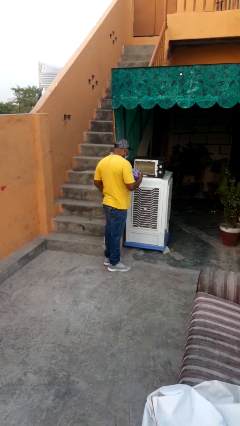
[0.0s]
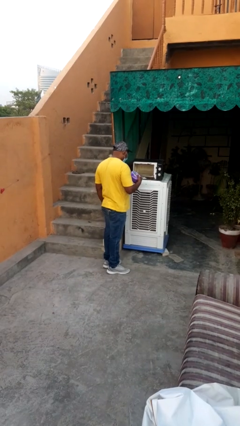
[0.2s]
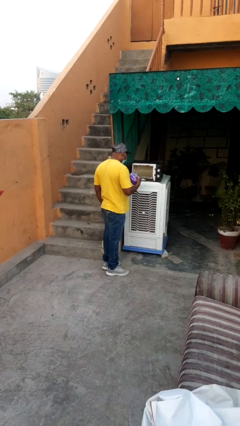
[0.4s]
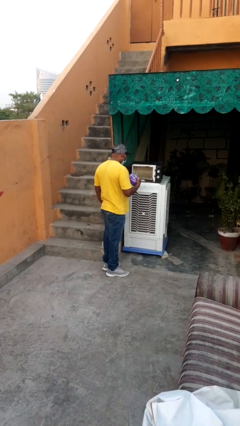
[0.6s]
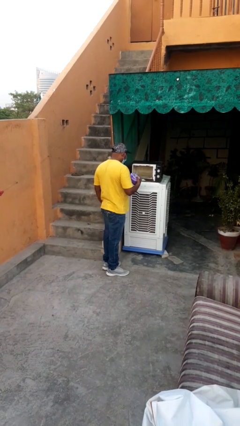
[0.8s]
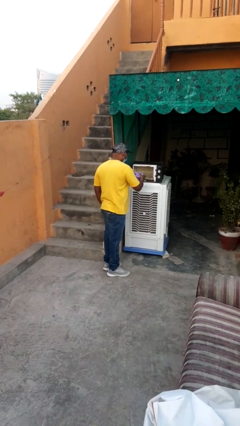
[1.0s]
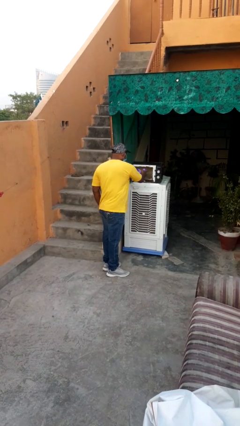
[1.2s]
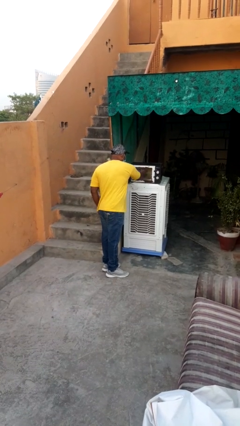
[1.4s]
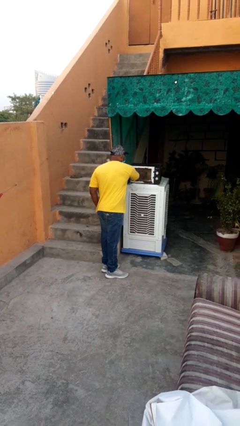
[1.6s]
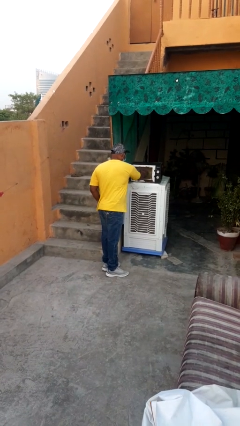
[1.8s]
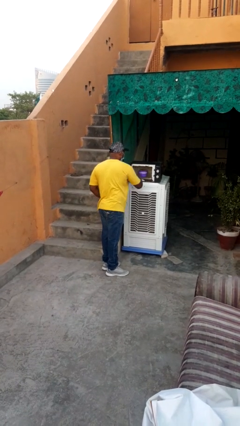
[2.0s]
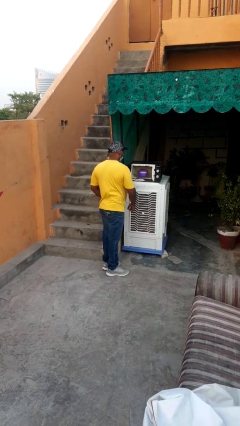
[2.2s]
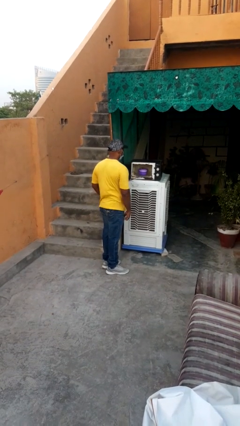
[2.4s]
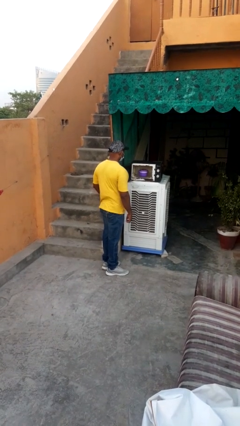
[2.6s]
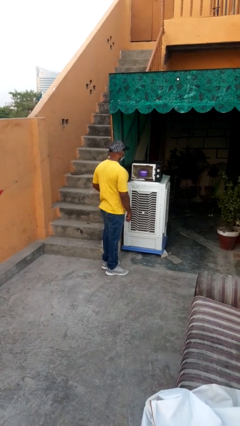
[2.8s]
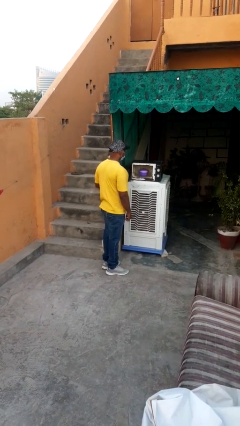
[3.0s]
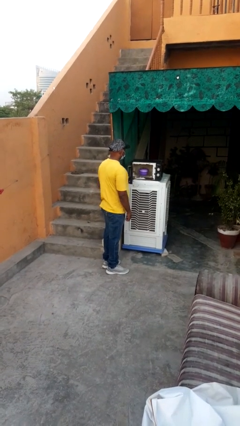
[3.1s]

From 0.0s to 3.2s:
person puts object into microwave

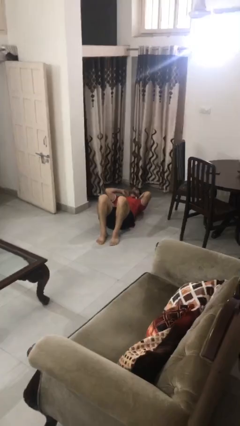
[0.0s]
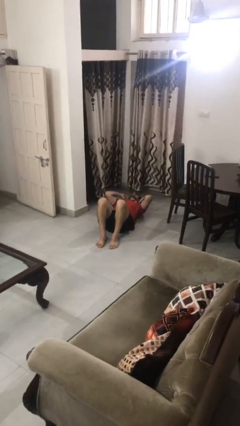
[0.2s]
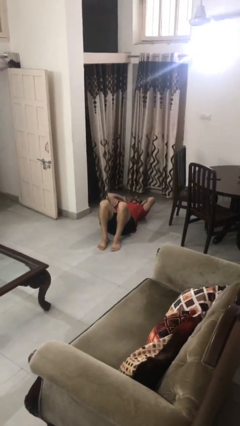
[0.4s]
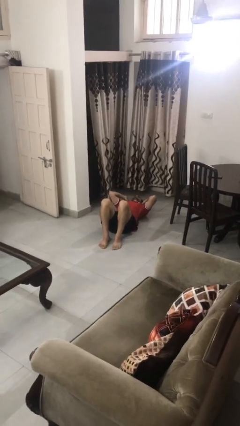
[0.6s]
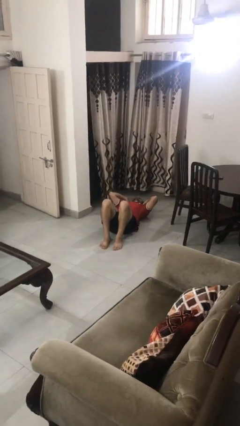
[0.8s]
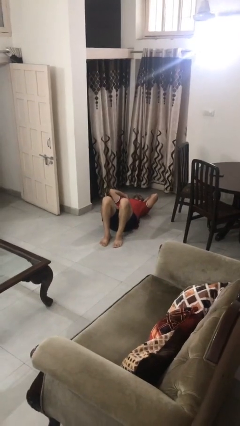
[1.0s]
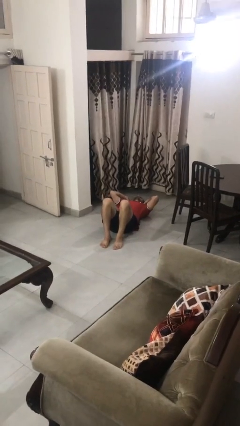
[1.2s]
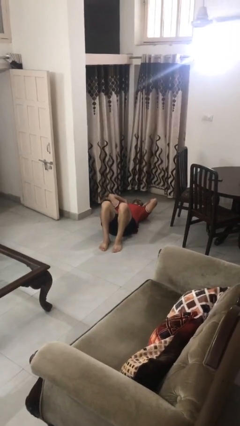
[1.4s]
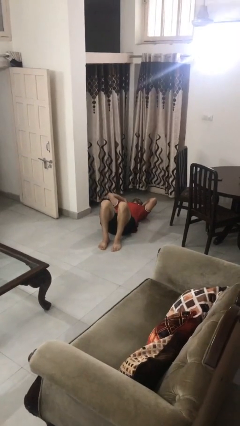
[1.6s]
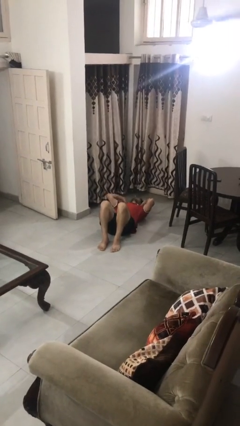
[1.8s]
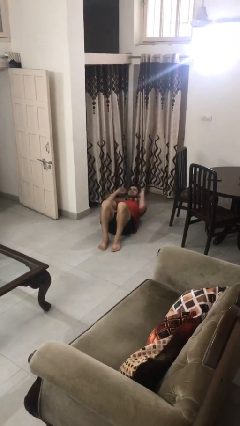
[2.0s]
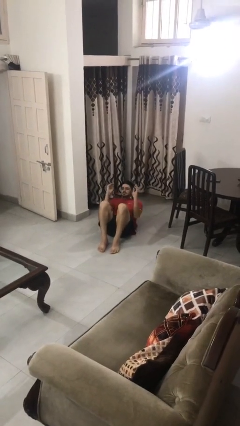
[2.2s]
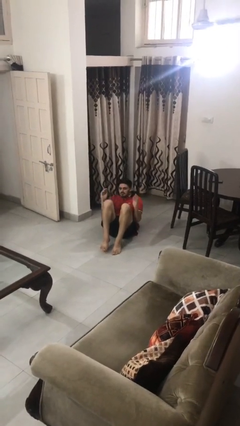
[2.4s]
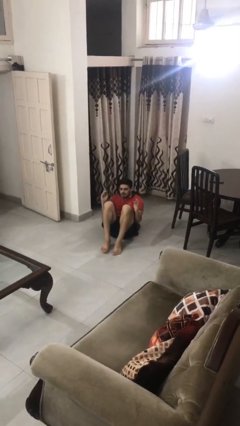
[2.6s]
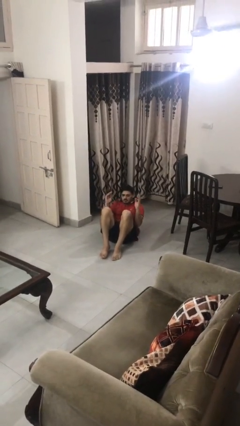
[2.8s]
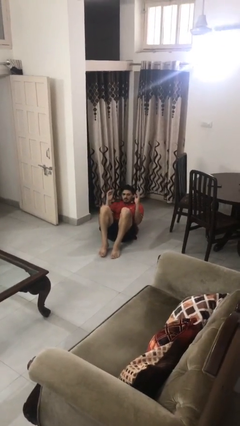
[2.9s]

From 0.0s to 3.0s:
person exercises with situp

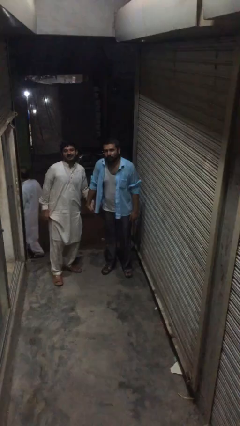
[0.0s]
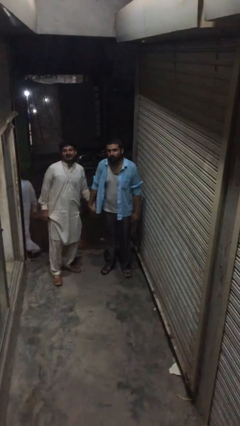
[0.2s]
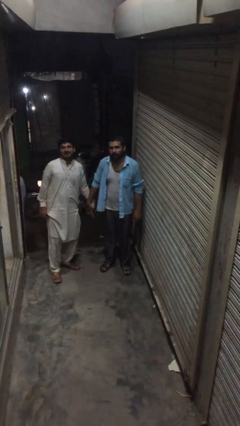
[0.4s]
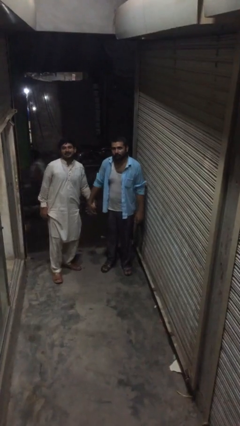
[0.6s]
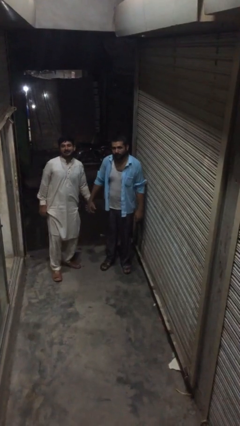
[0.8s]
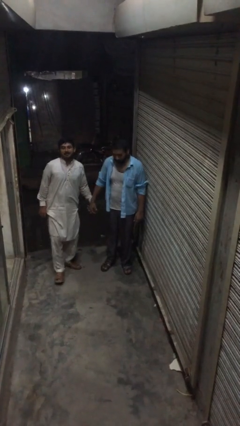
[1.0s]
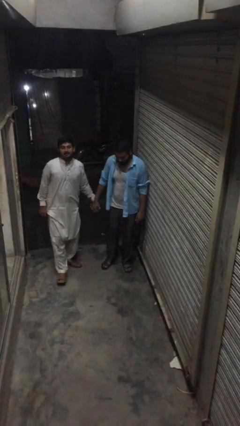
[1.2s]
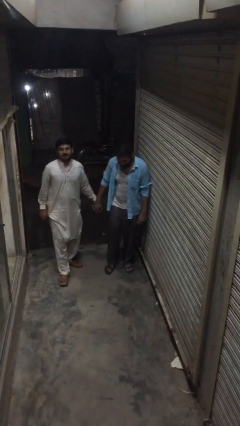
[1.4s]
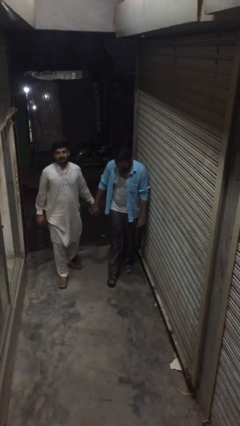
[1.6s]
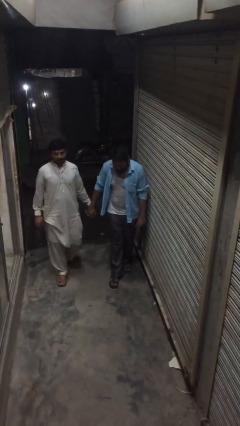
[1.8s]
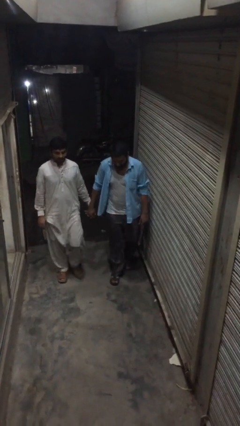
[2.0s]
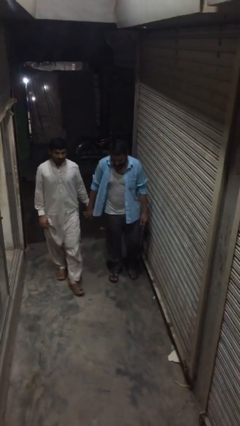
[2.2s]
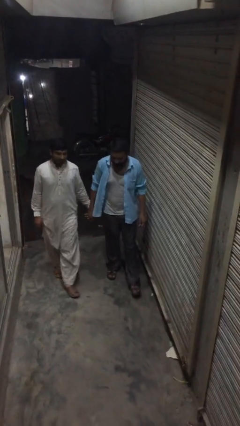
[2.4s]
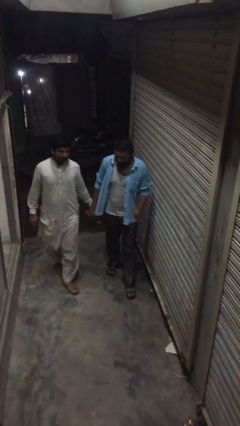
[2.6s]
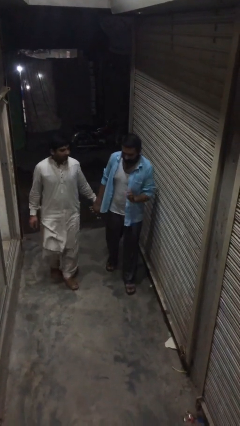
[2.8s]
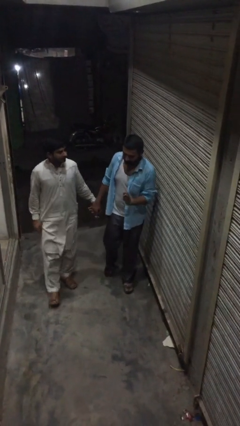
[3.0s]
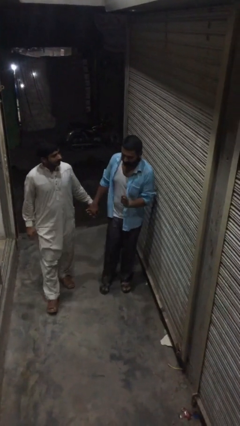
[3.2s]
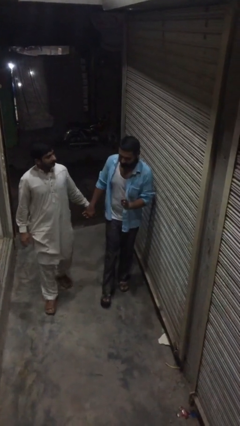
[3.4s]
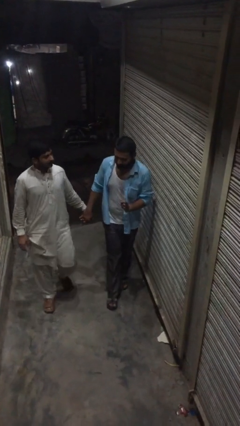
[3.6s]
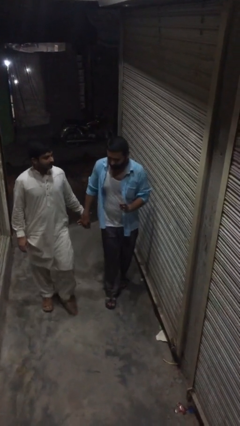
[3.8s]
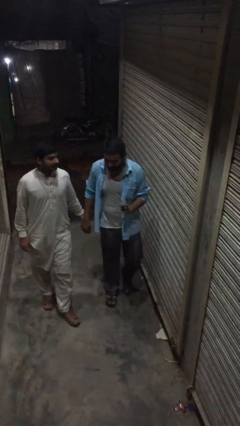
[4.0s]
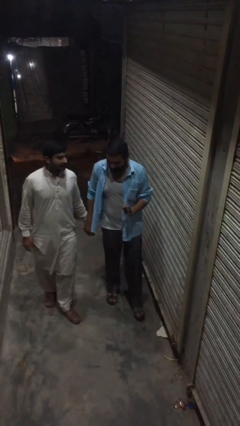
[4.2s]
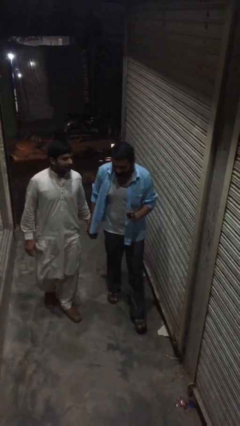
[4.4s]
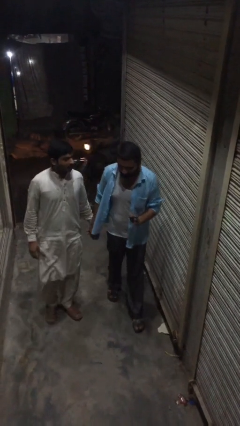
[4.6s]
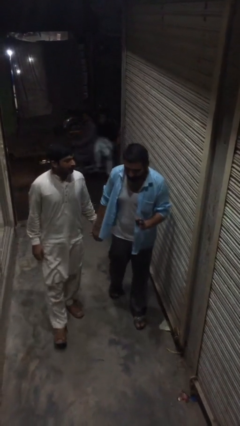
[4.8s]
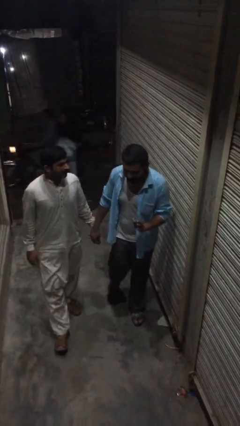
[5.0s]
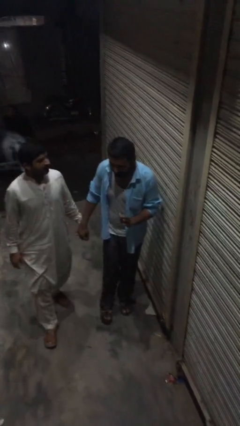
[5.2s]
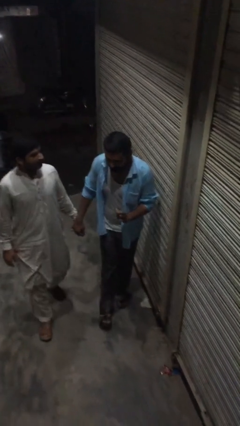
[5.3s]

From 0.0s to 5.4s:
person holds hand

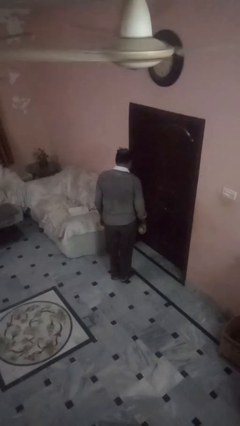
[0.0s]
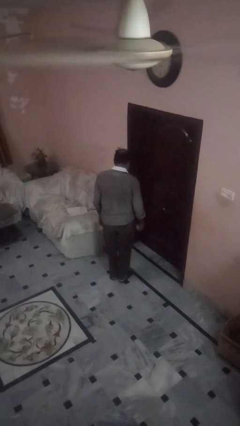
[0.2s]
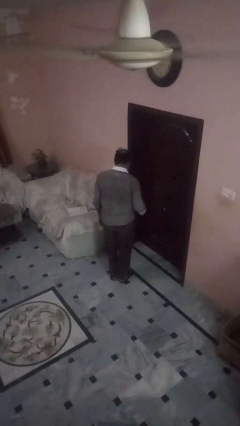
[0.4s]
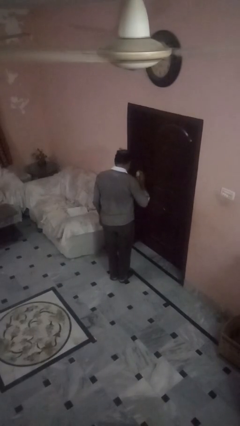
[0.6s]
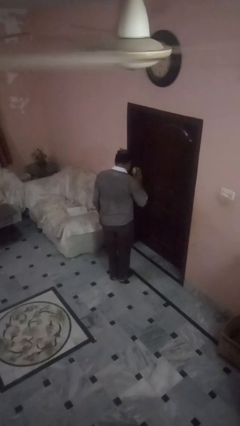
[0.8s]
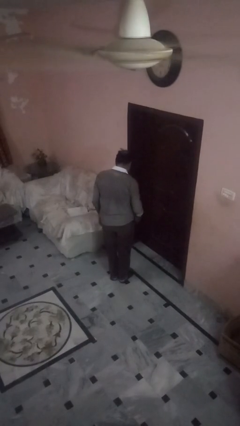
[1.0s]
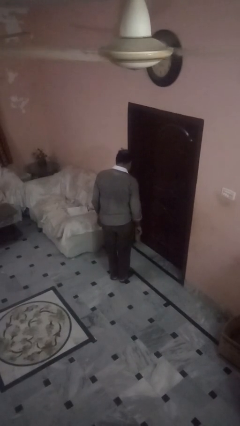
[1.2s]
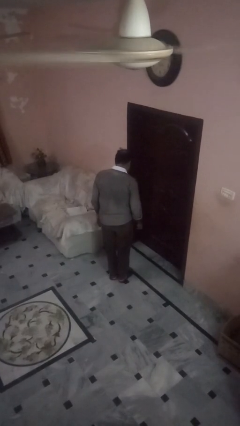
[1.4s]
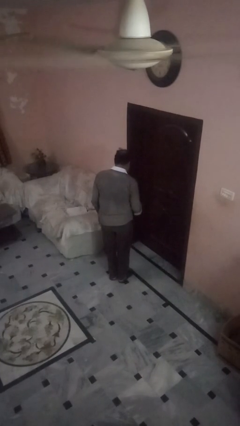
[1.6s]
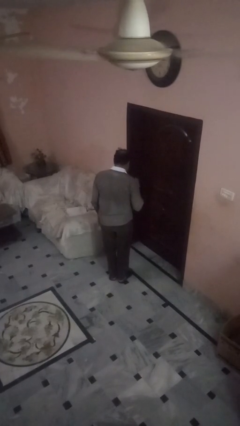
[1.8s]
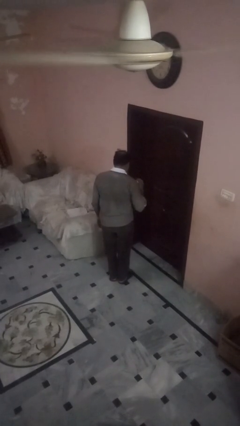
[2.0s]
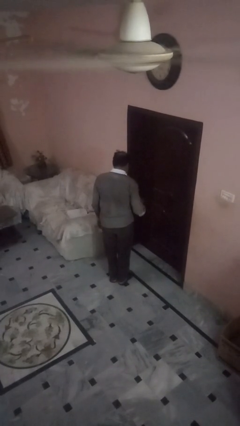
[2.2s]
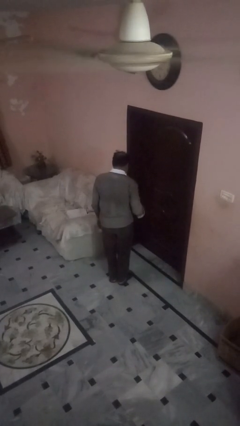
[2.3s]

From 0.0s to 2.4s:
person bounces ball on floor

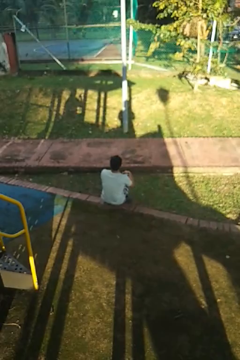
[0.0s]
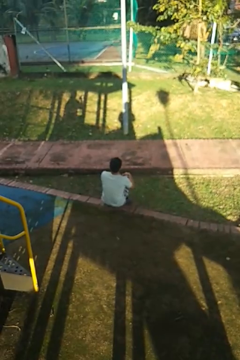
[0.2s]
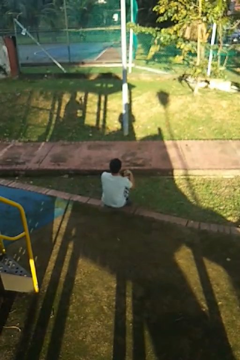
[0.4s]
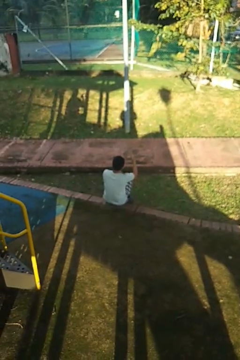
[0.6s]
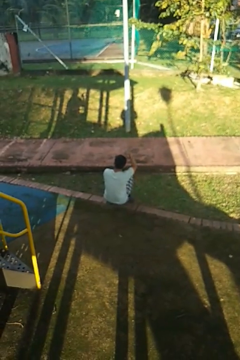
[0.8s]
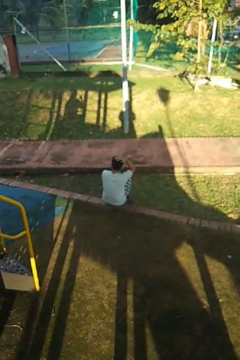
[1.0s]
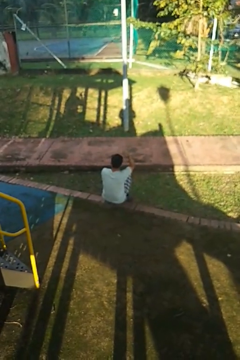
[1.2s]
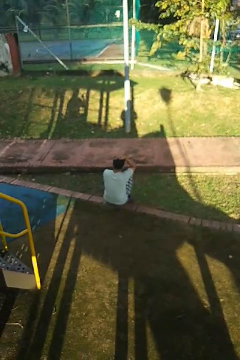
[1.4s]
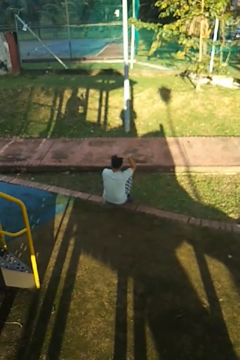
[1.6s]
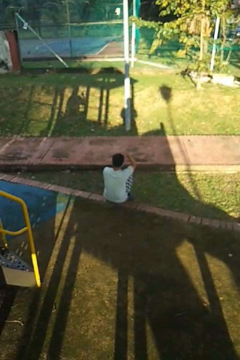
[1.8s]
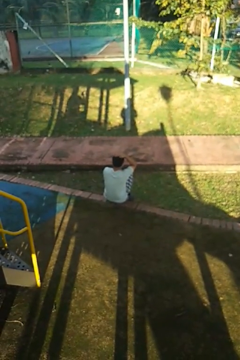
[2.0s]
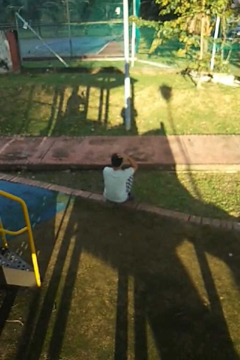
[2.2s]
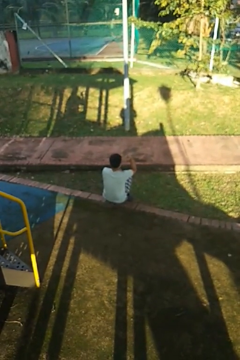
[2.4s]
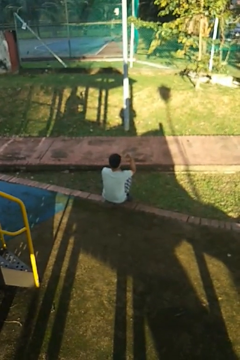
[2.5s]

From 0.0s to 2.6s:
person pats head

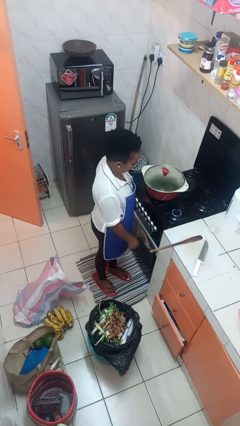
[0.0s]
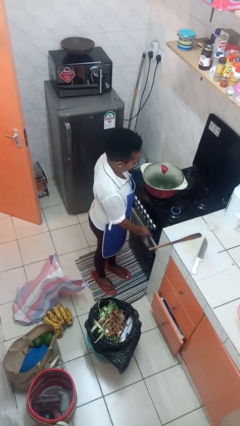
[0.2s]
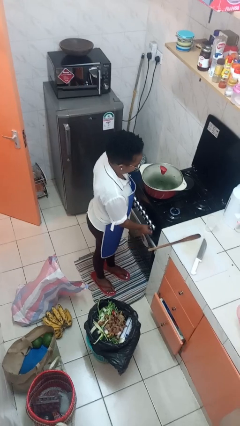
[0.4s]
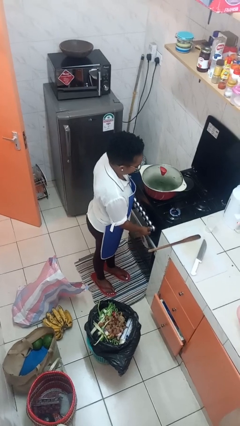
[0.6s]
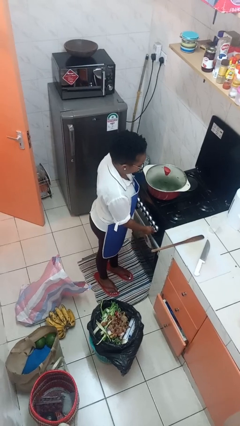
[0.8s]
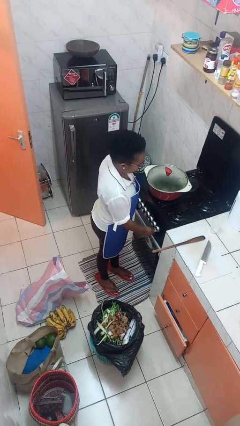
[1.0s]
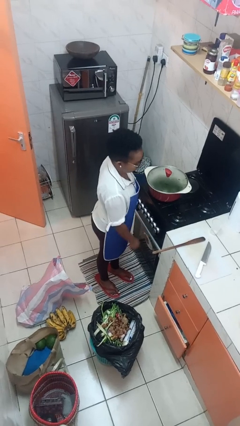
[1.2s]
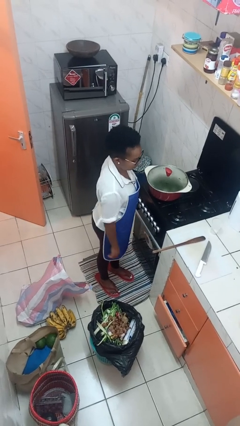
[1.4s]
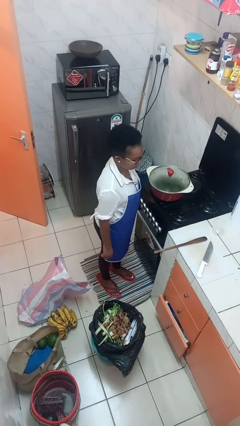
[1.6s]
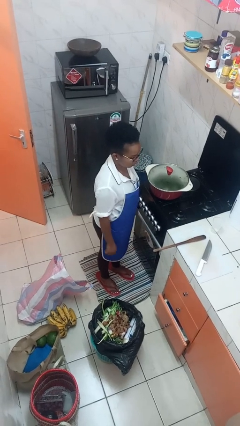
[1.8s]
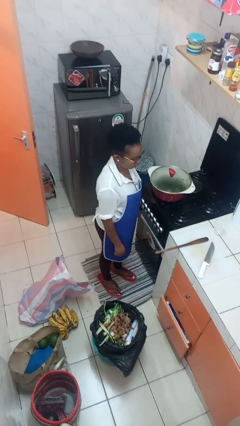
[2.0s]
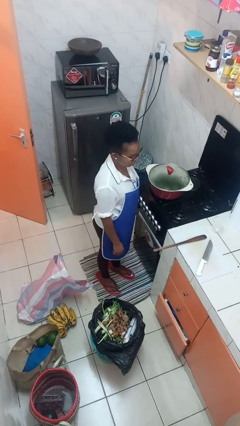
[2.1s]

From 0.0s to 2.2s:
person turns off stovetop
